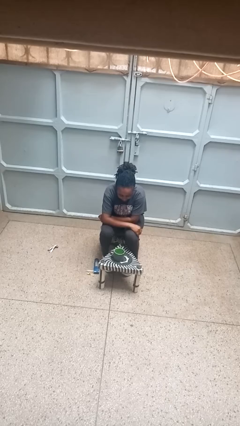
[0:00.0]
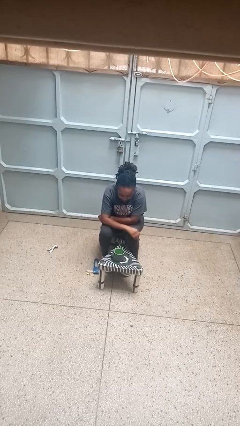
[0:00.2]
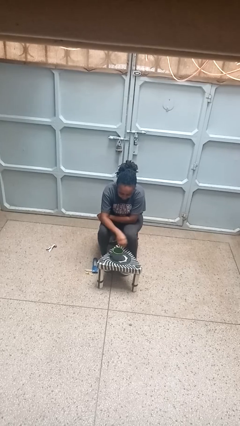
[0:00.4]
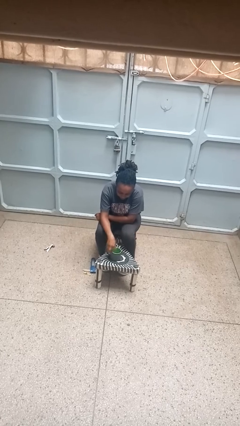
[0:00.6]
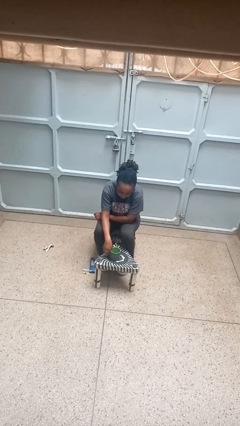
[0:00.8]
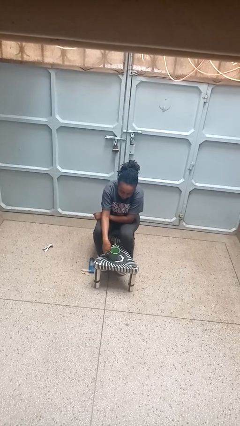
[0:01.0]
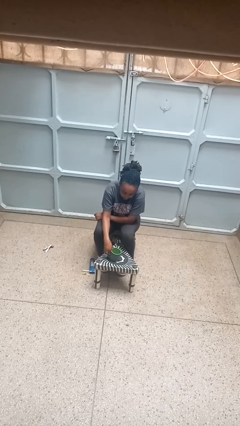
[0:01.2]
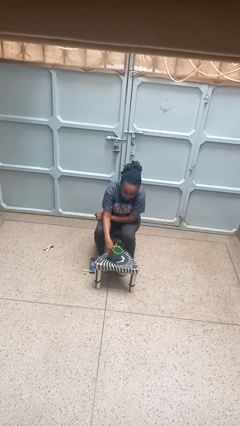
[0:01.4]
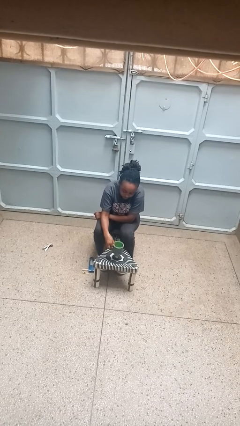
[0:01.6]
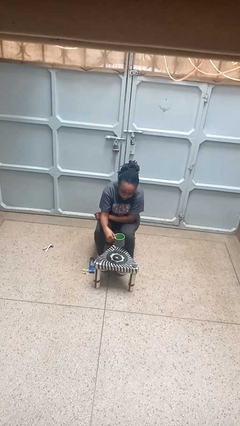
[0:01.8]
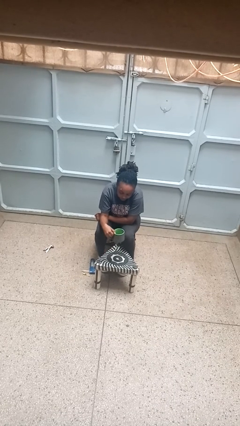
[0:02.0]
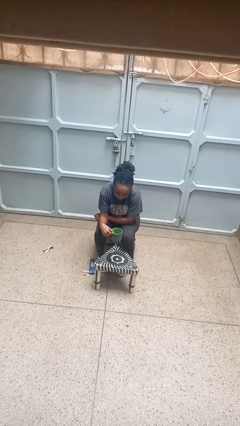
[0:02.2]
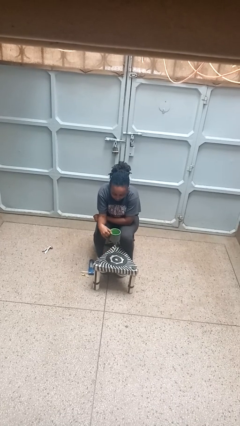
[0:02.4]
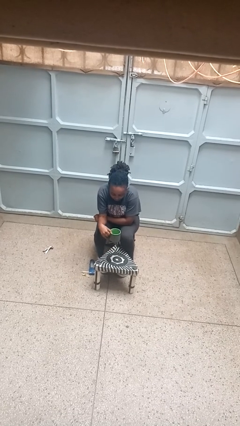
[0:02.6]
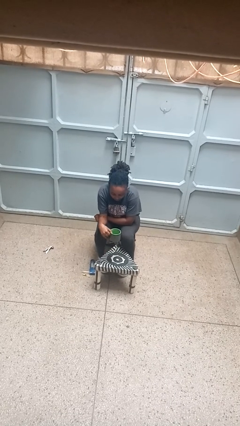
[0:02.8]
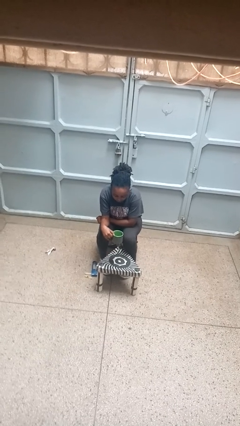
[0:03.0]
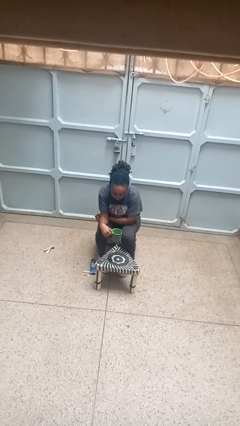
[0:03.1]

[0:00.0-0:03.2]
person picks up object from table

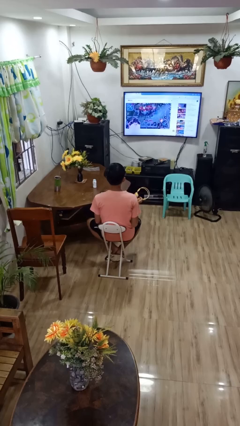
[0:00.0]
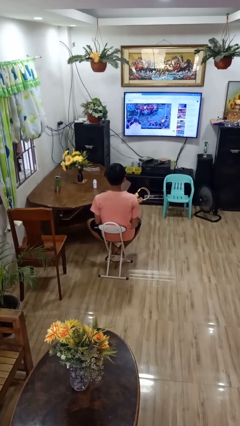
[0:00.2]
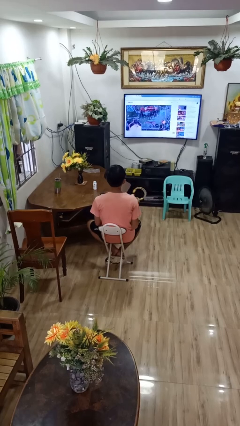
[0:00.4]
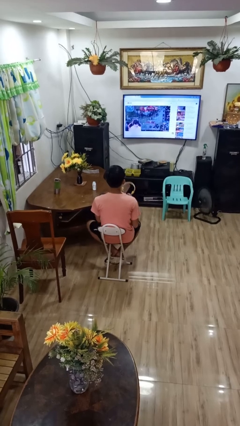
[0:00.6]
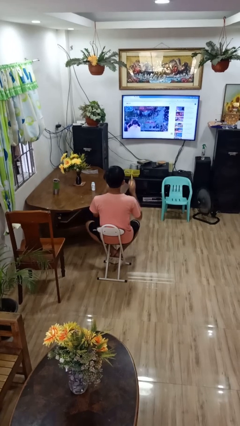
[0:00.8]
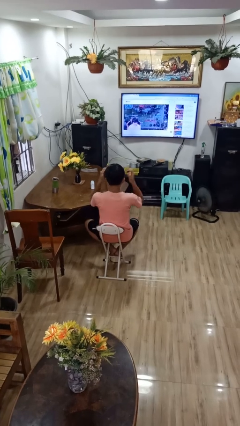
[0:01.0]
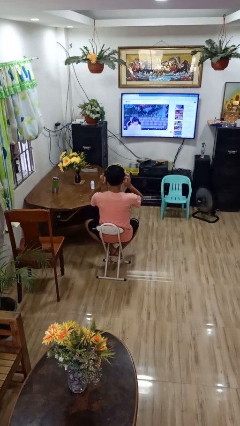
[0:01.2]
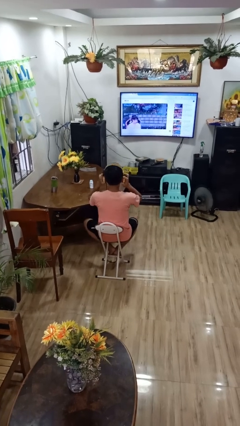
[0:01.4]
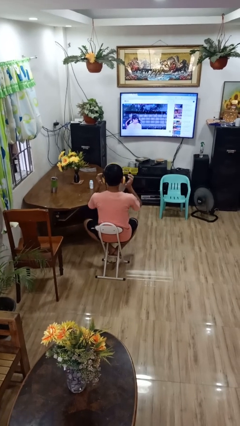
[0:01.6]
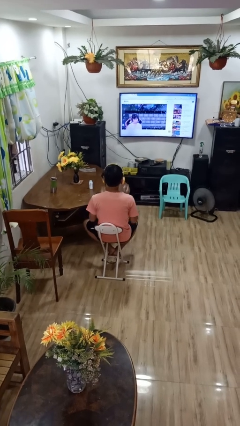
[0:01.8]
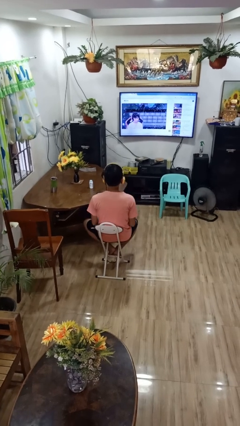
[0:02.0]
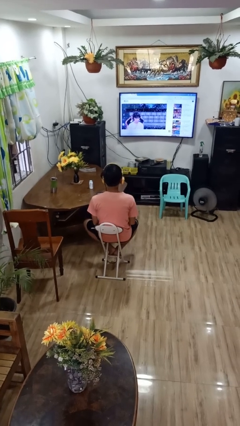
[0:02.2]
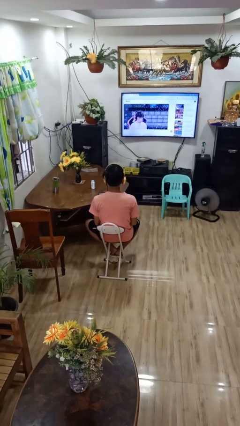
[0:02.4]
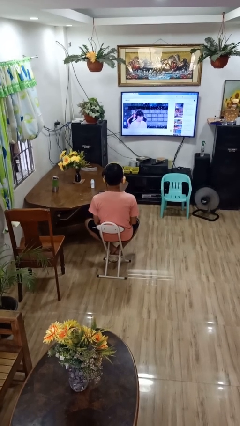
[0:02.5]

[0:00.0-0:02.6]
person puts on headphones

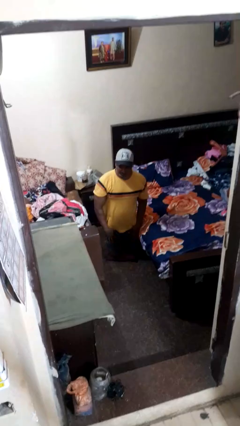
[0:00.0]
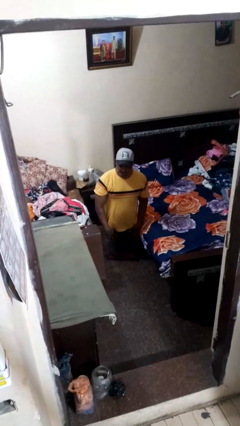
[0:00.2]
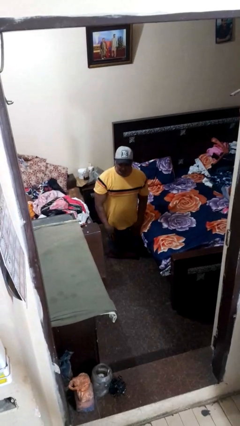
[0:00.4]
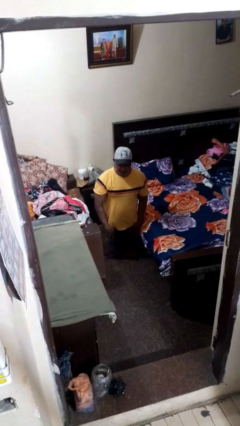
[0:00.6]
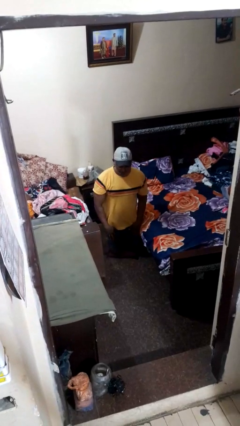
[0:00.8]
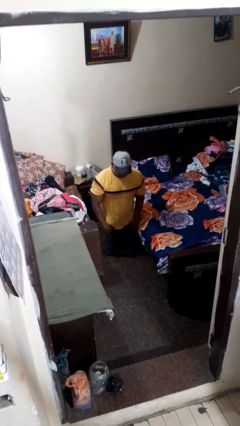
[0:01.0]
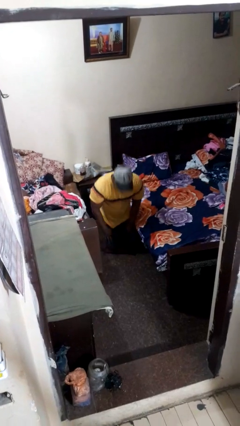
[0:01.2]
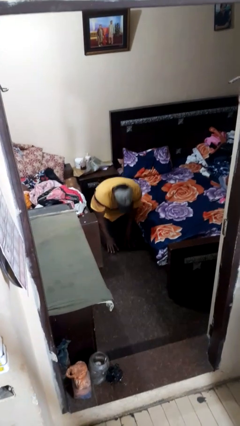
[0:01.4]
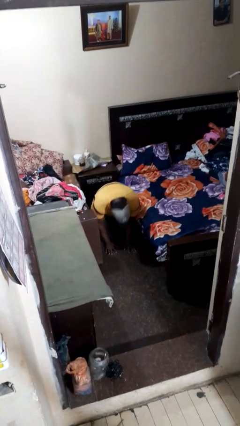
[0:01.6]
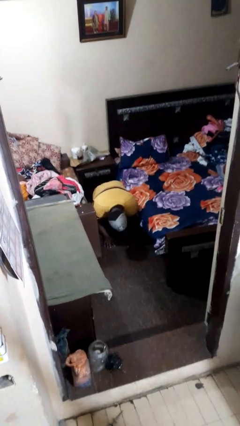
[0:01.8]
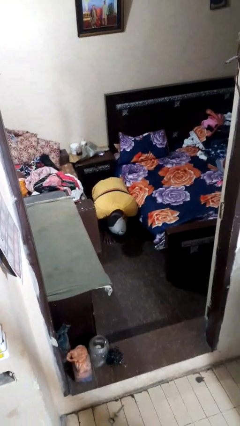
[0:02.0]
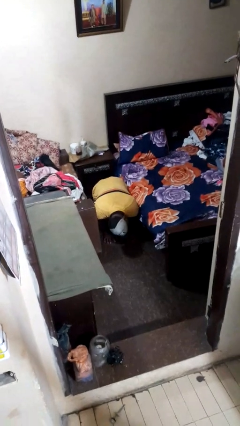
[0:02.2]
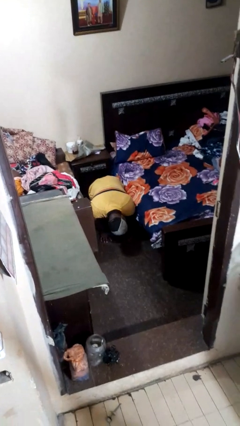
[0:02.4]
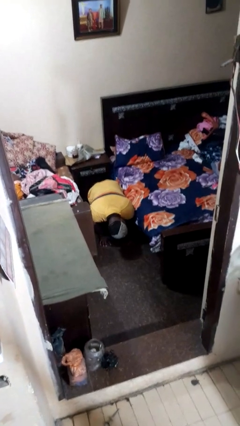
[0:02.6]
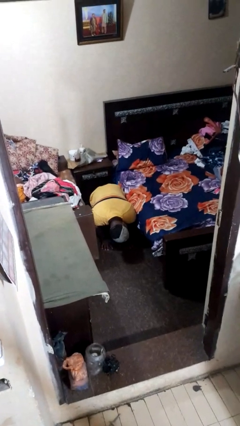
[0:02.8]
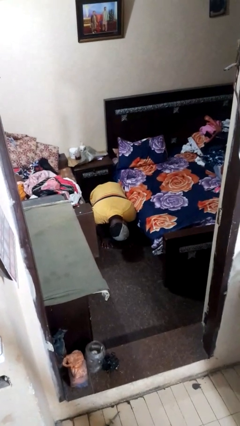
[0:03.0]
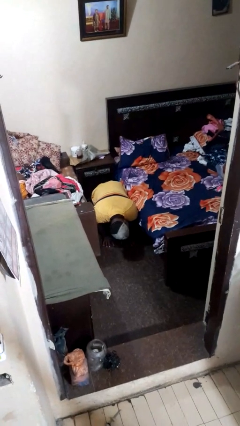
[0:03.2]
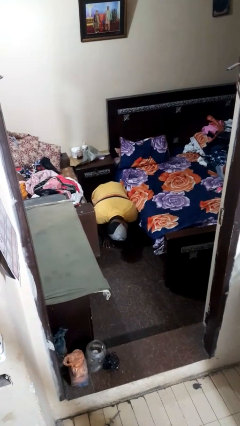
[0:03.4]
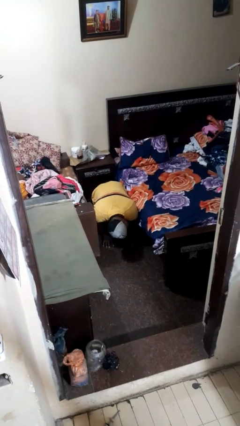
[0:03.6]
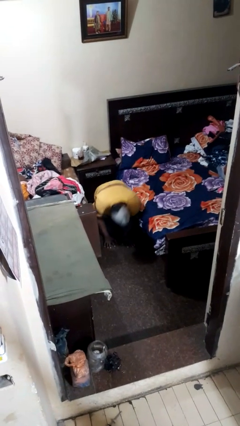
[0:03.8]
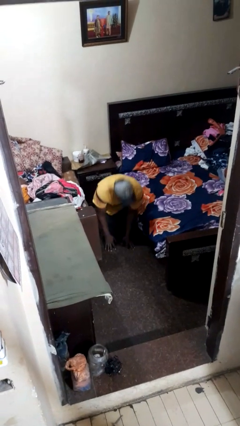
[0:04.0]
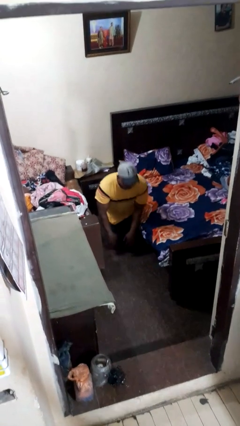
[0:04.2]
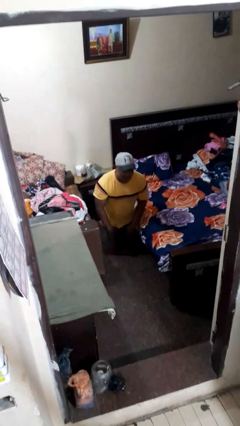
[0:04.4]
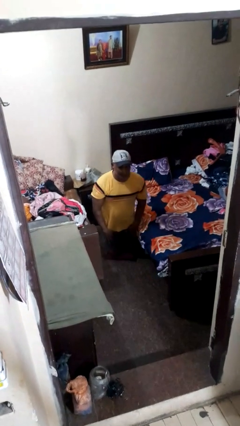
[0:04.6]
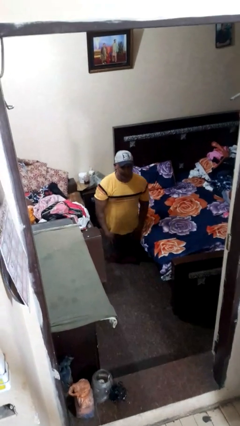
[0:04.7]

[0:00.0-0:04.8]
person searches under bed

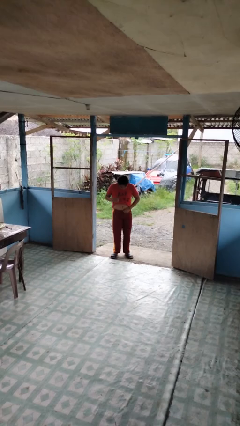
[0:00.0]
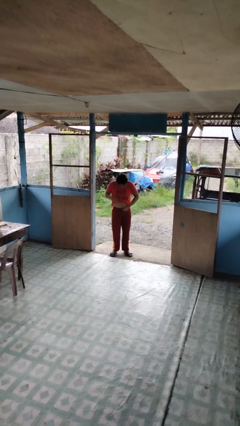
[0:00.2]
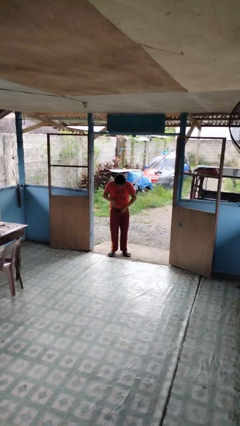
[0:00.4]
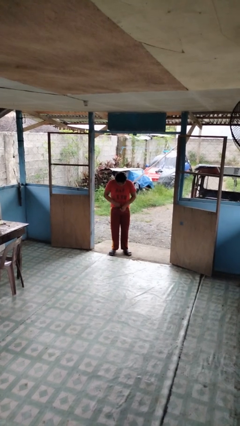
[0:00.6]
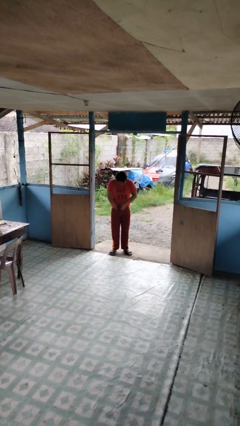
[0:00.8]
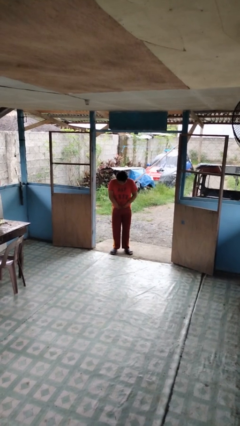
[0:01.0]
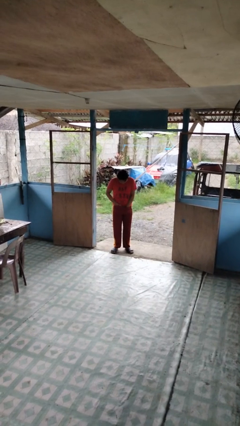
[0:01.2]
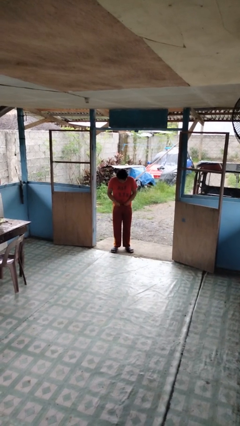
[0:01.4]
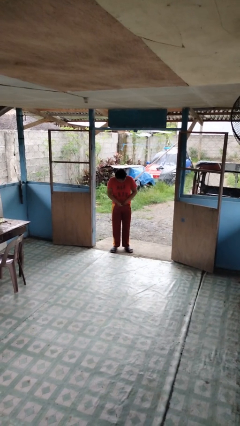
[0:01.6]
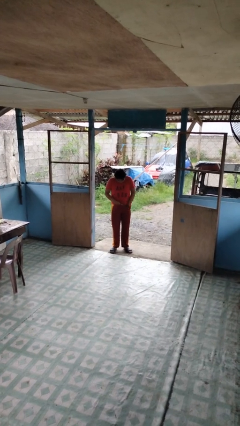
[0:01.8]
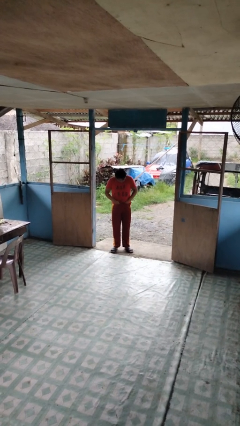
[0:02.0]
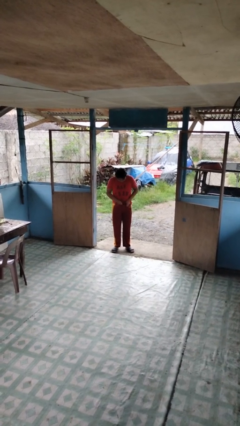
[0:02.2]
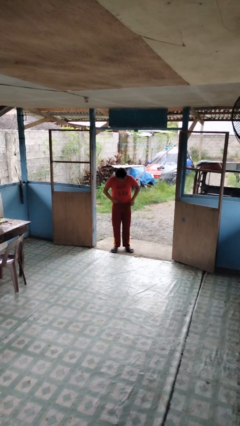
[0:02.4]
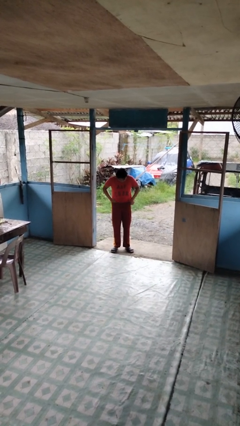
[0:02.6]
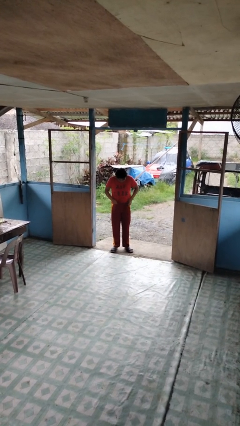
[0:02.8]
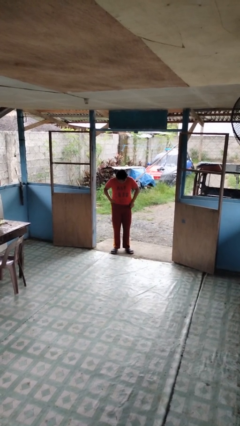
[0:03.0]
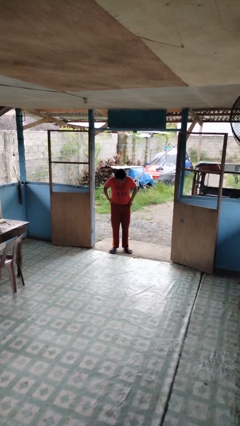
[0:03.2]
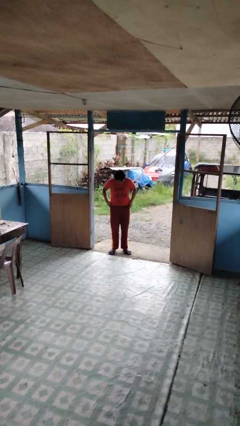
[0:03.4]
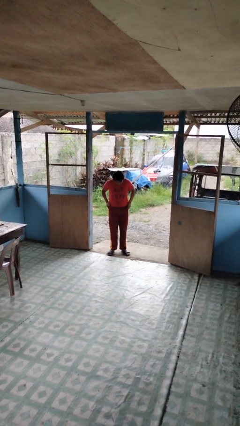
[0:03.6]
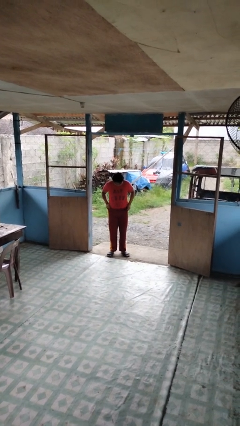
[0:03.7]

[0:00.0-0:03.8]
person tucks in shirt

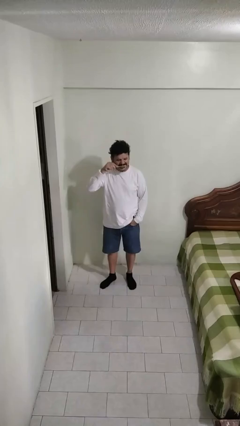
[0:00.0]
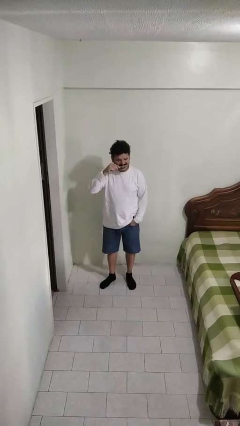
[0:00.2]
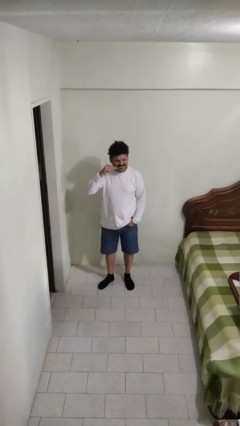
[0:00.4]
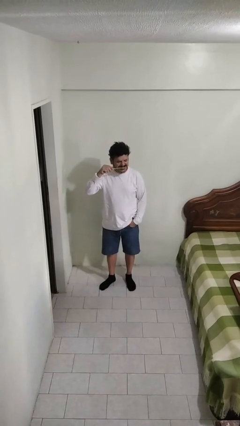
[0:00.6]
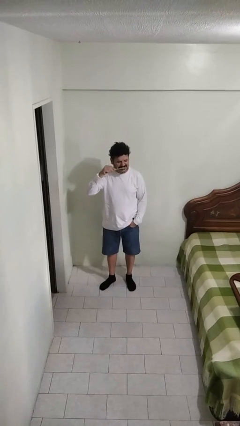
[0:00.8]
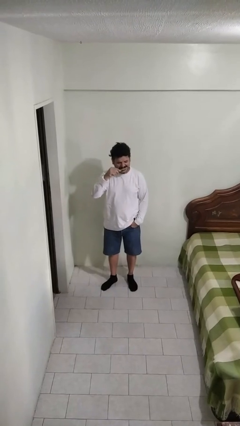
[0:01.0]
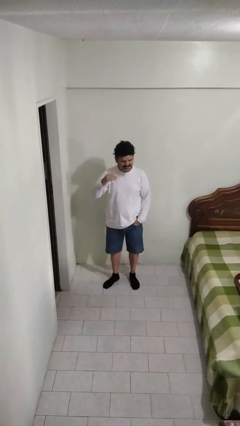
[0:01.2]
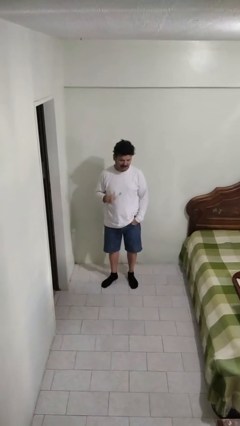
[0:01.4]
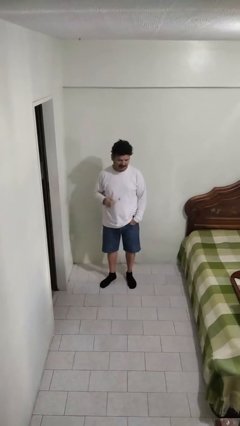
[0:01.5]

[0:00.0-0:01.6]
person brushes teeth

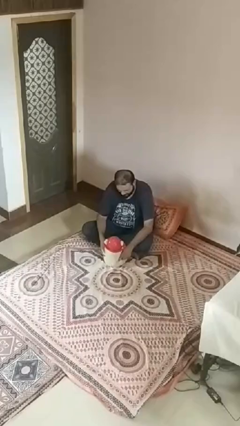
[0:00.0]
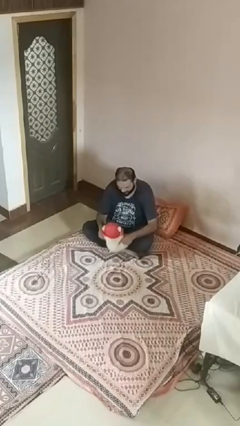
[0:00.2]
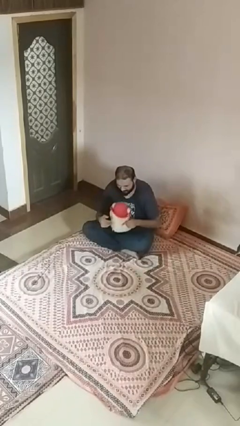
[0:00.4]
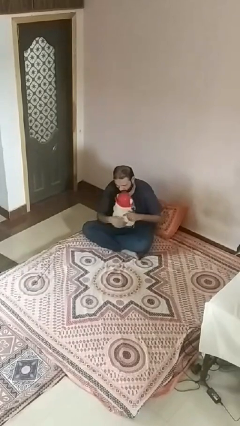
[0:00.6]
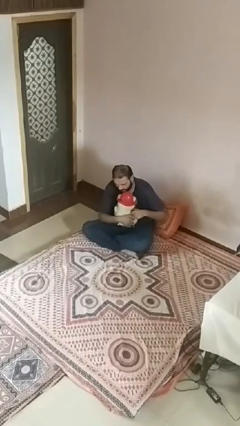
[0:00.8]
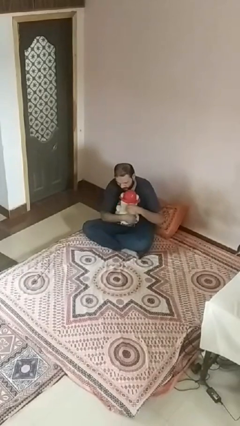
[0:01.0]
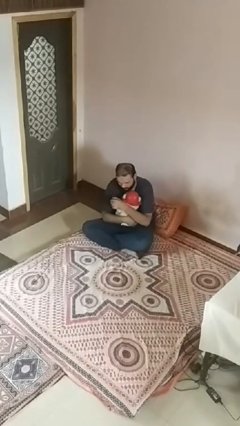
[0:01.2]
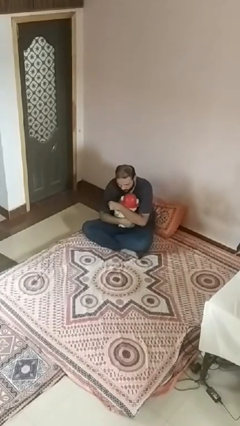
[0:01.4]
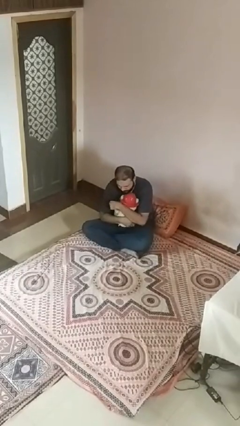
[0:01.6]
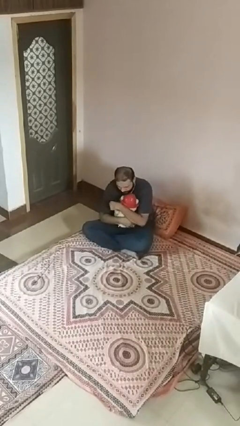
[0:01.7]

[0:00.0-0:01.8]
person hugs stuffed animal
